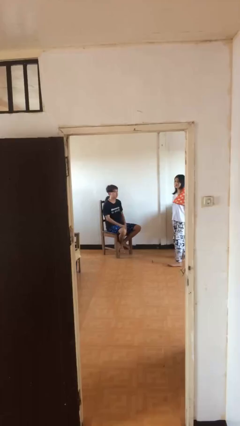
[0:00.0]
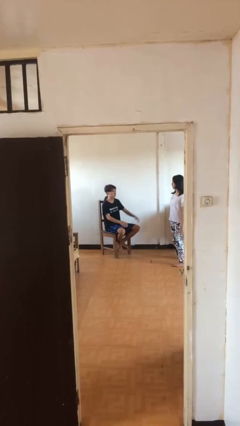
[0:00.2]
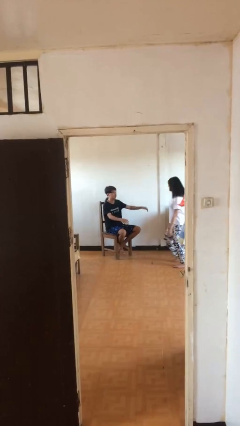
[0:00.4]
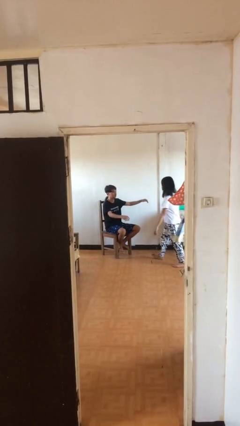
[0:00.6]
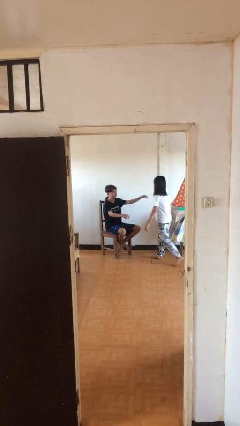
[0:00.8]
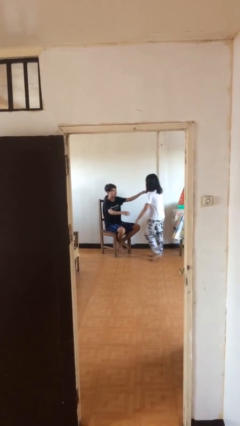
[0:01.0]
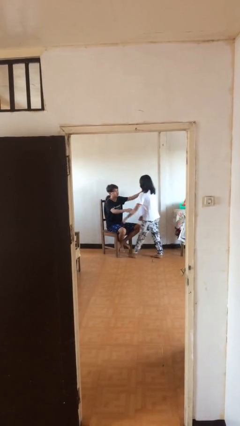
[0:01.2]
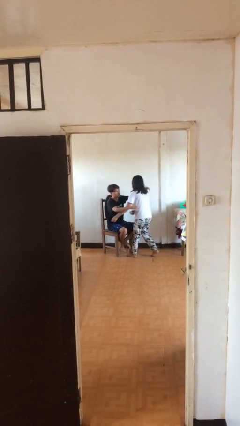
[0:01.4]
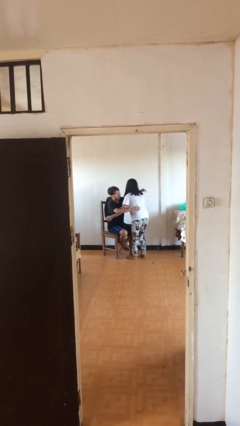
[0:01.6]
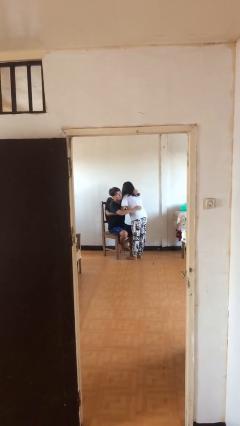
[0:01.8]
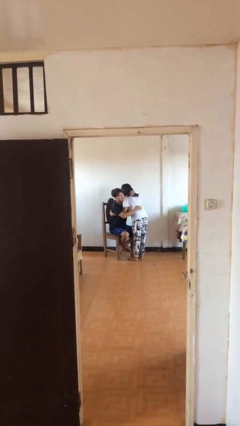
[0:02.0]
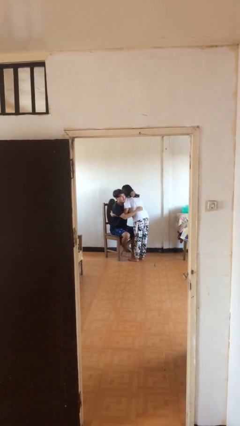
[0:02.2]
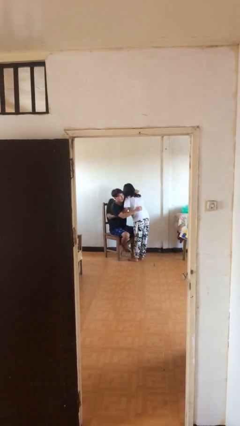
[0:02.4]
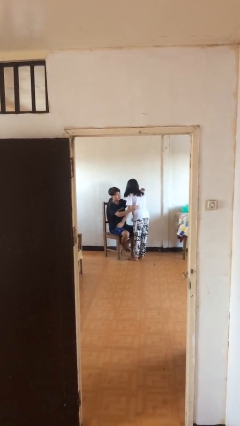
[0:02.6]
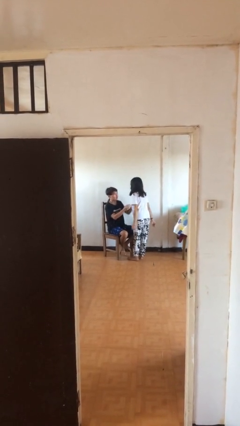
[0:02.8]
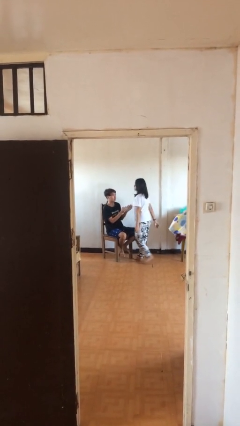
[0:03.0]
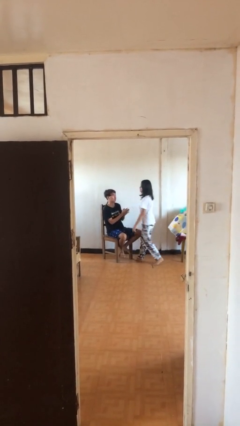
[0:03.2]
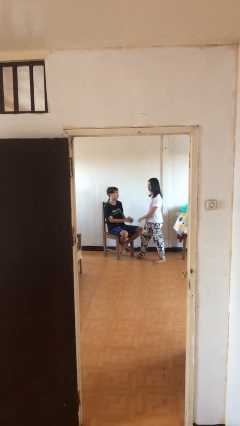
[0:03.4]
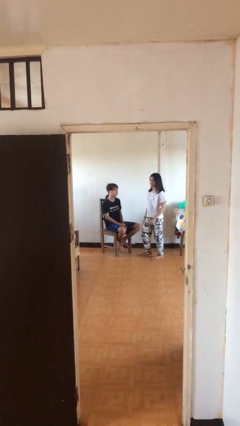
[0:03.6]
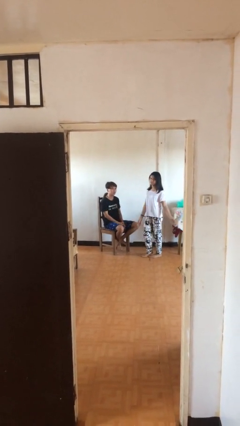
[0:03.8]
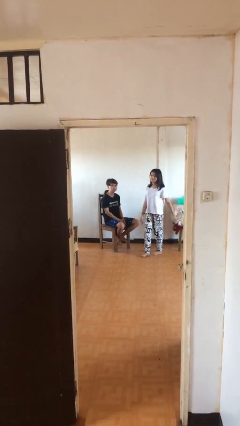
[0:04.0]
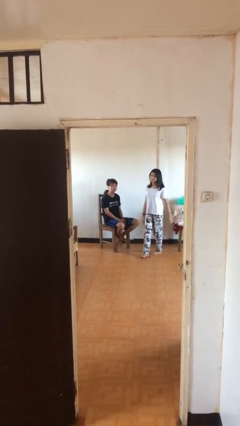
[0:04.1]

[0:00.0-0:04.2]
person embraces person

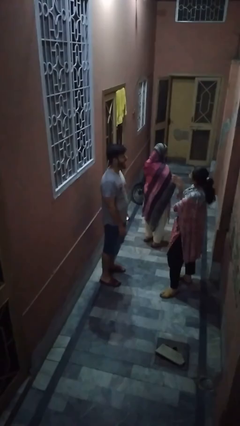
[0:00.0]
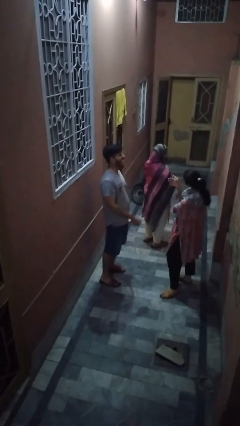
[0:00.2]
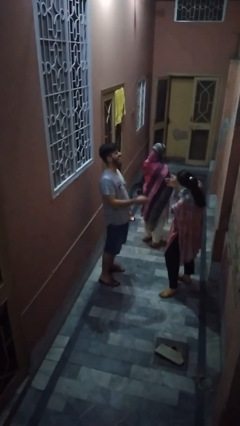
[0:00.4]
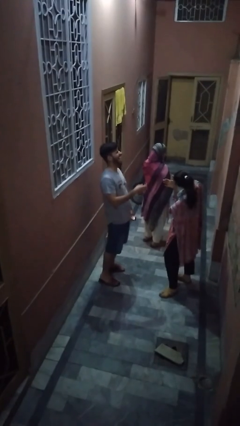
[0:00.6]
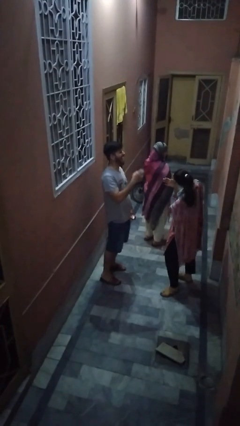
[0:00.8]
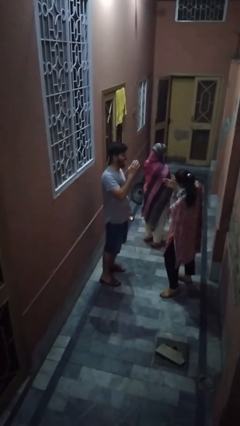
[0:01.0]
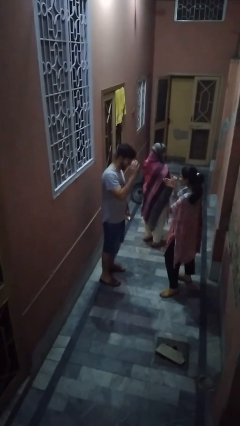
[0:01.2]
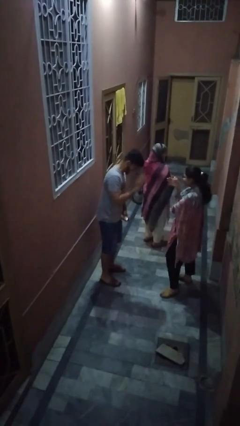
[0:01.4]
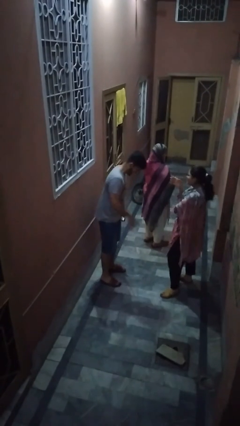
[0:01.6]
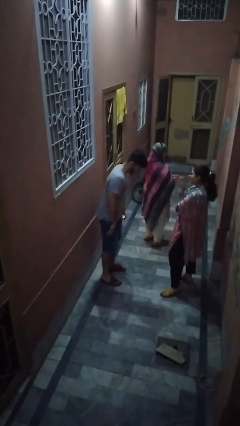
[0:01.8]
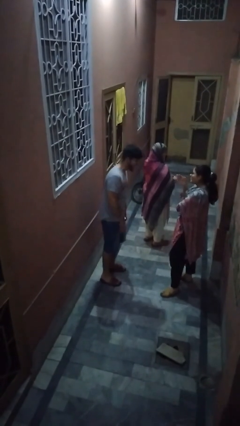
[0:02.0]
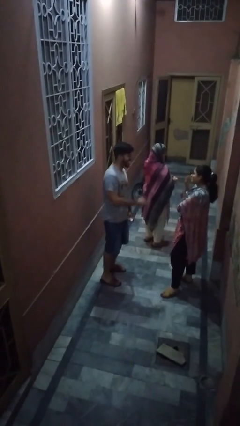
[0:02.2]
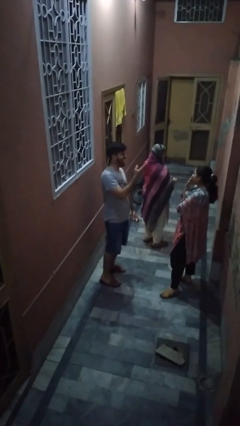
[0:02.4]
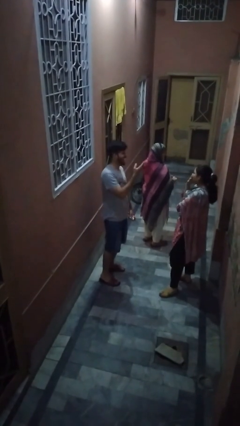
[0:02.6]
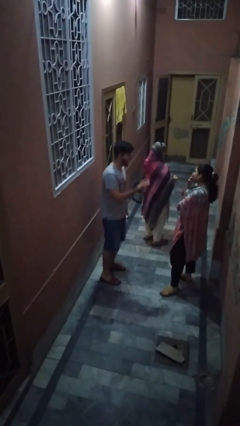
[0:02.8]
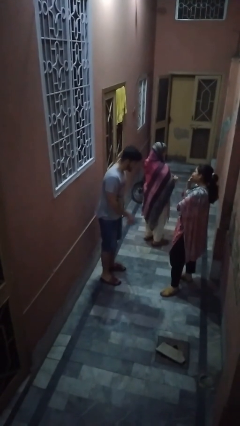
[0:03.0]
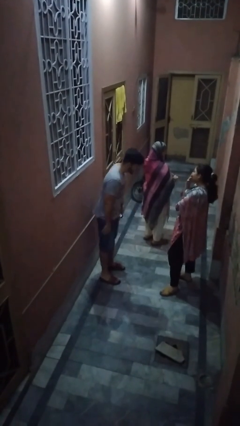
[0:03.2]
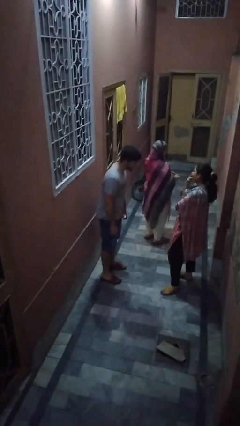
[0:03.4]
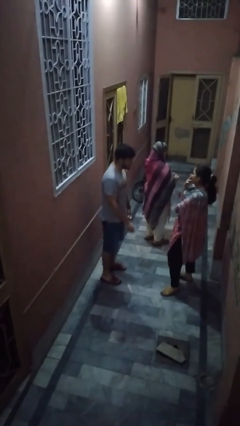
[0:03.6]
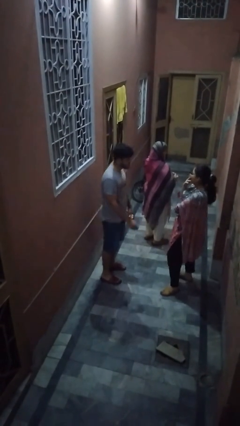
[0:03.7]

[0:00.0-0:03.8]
person laughs with person

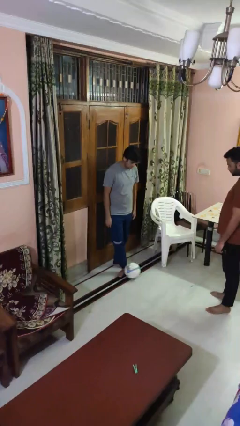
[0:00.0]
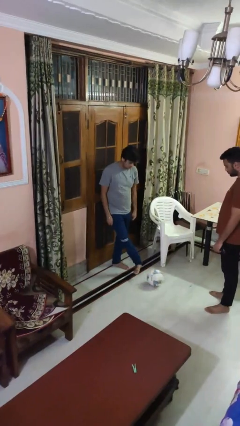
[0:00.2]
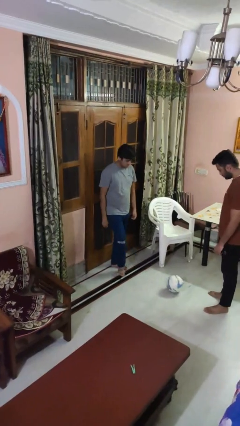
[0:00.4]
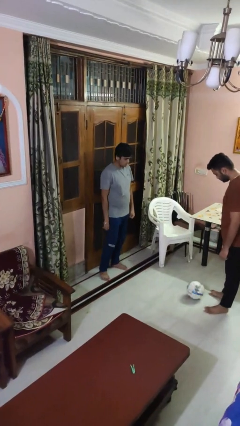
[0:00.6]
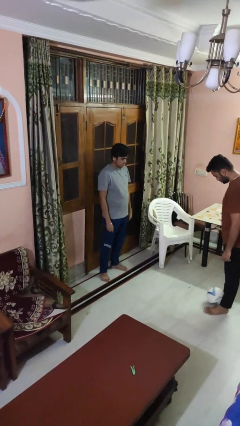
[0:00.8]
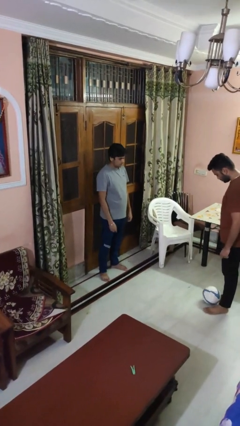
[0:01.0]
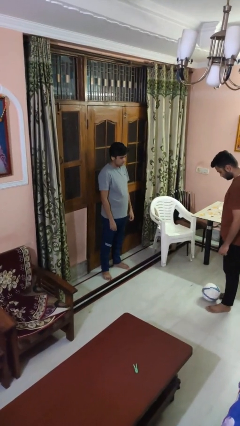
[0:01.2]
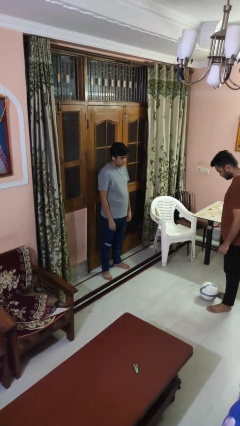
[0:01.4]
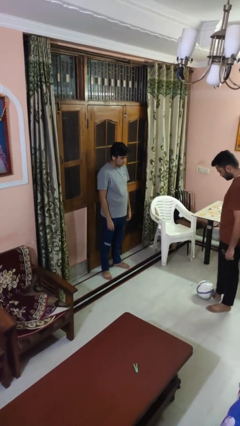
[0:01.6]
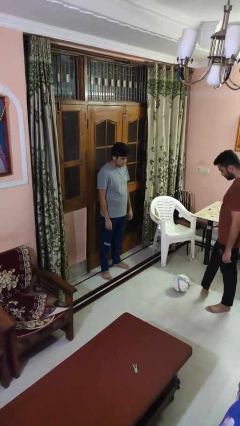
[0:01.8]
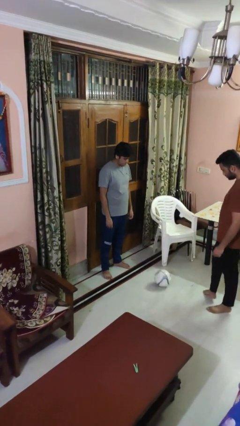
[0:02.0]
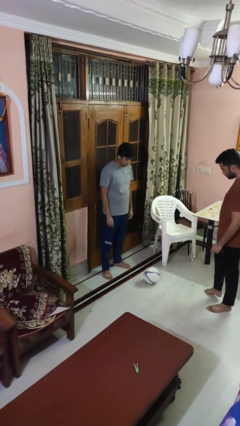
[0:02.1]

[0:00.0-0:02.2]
person kicks object to person

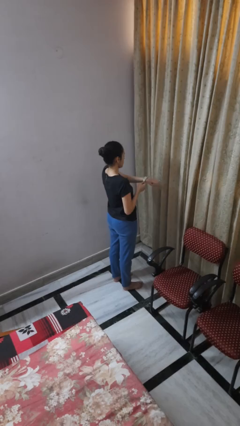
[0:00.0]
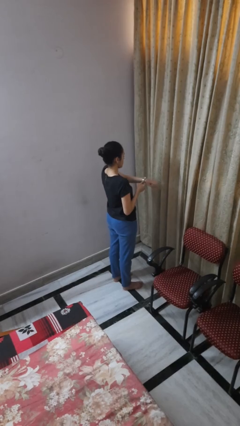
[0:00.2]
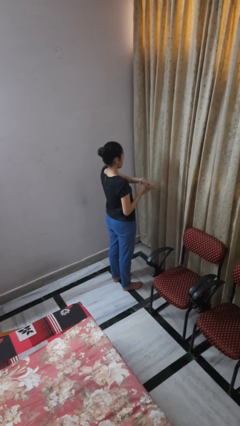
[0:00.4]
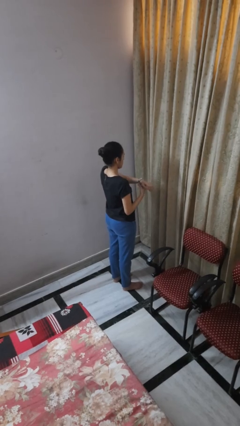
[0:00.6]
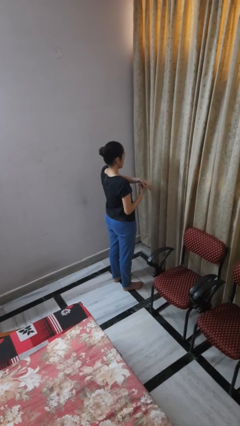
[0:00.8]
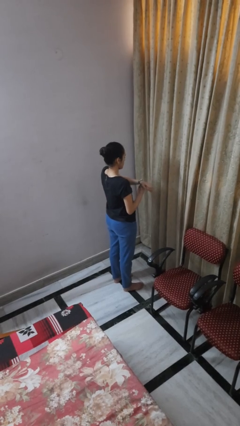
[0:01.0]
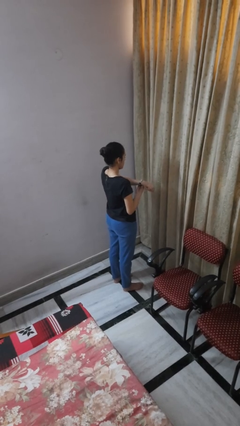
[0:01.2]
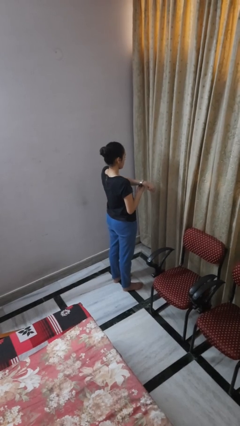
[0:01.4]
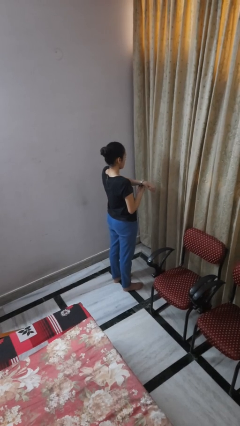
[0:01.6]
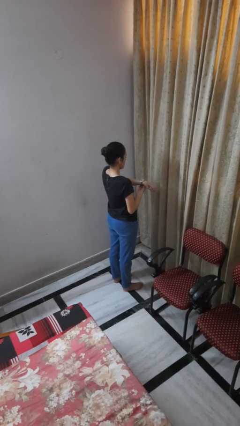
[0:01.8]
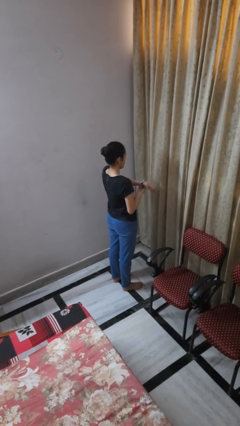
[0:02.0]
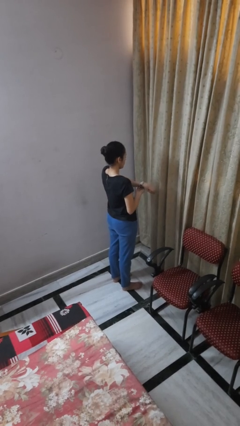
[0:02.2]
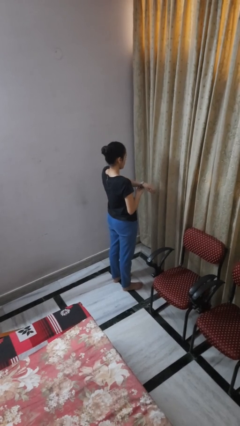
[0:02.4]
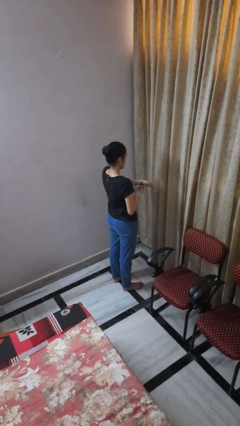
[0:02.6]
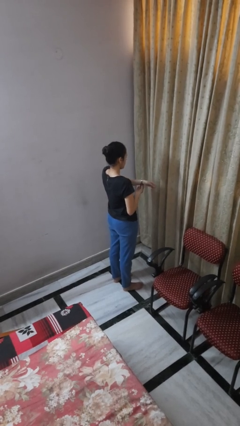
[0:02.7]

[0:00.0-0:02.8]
person puts on wristwatch

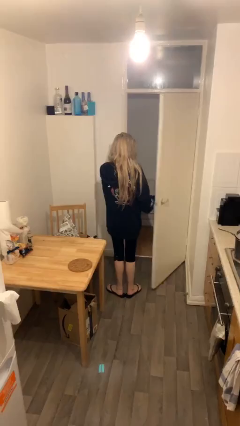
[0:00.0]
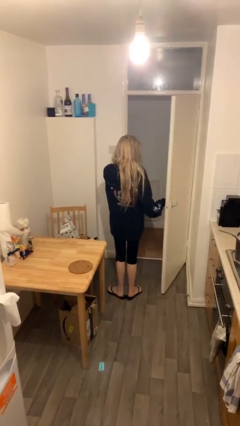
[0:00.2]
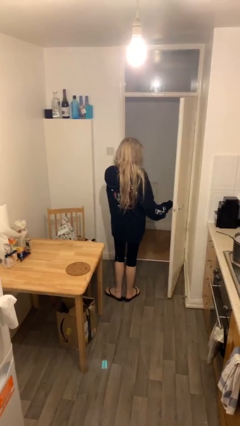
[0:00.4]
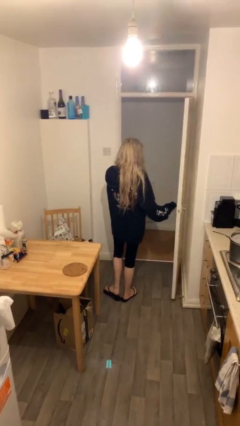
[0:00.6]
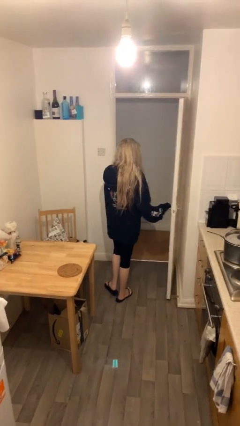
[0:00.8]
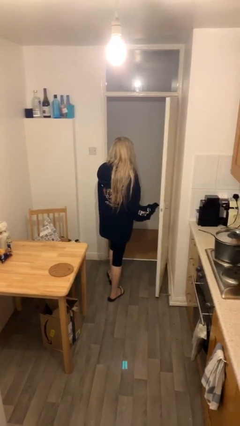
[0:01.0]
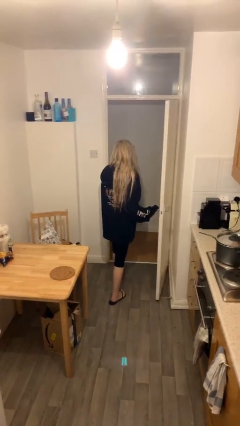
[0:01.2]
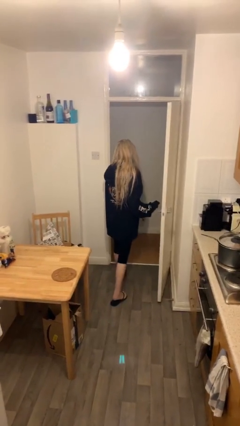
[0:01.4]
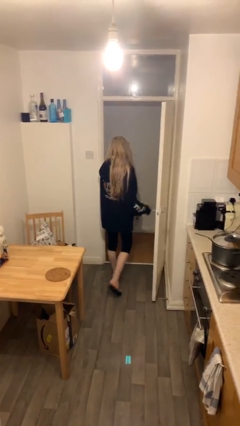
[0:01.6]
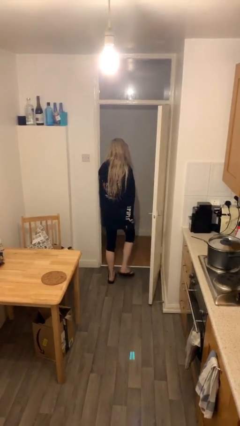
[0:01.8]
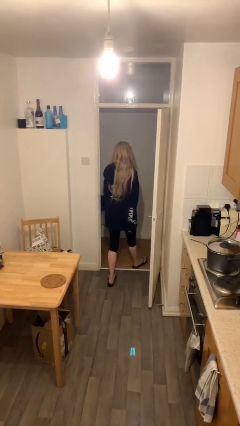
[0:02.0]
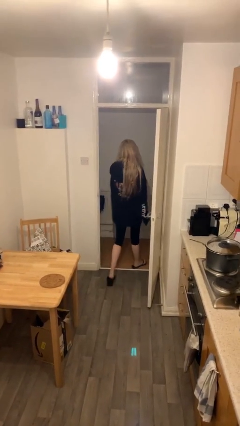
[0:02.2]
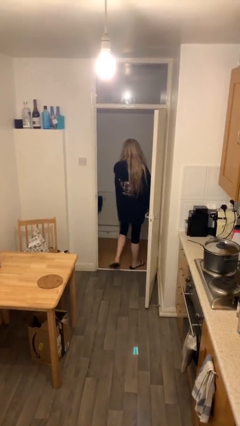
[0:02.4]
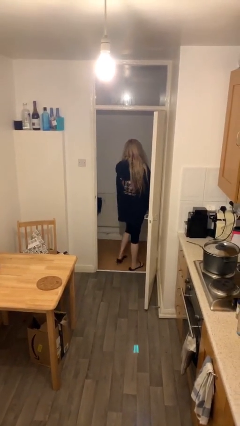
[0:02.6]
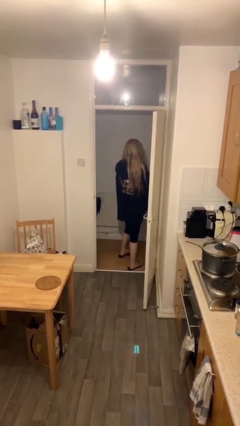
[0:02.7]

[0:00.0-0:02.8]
person exits scene through structure

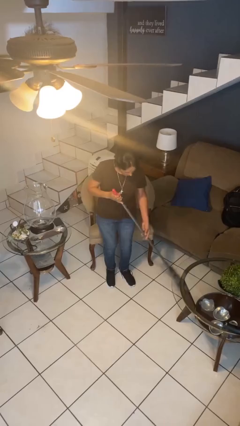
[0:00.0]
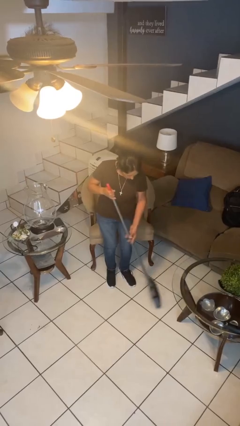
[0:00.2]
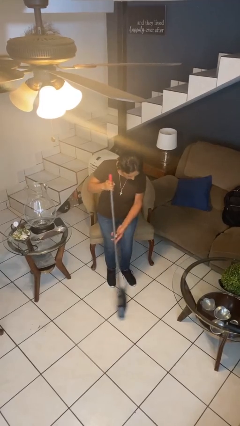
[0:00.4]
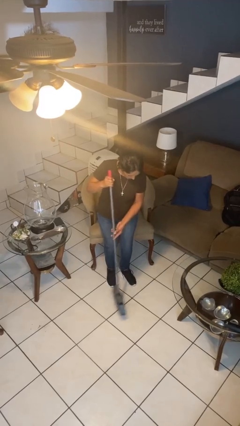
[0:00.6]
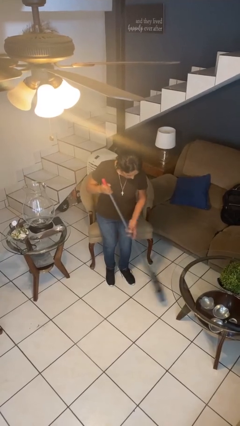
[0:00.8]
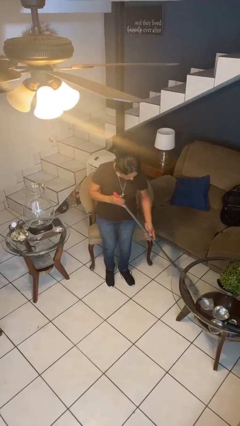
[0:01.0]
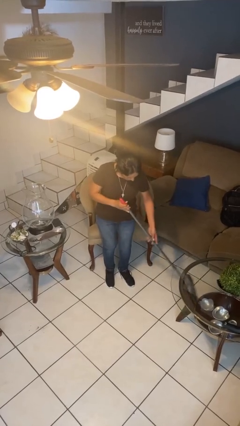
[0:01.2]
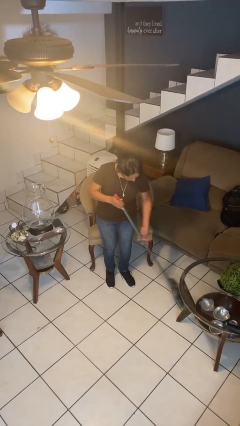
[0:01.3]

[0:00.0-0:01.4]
person sweeps floor

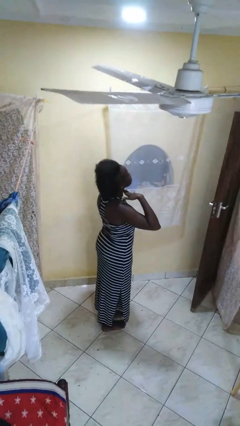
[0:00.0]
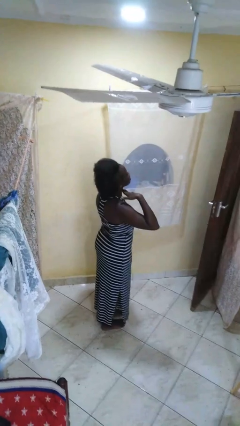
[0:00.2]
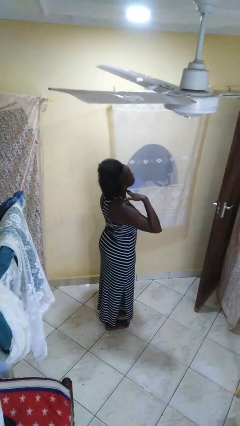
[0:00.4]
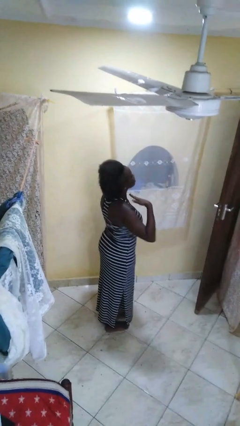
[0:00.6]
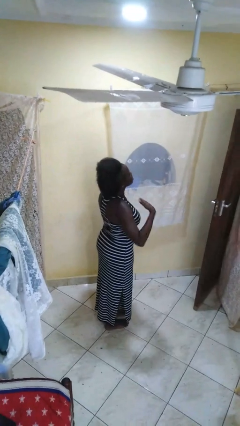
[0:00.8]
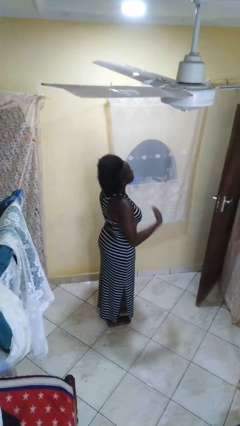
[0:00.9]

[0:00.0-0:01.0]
person gestures cut
